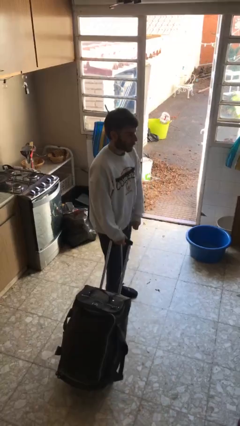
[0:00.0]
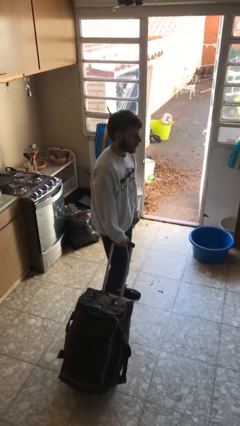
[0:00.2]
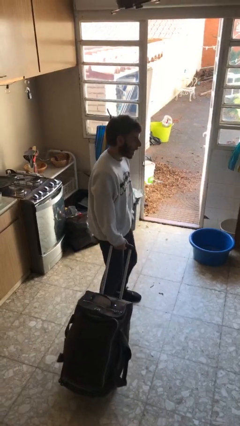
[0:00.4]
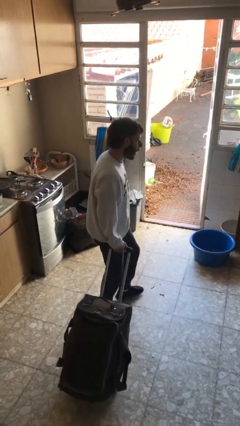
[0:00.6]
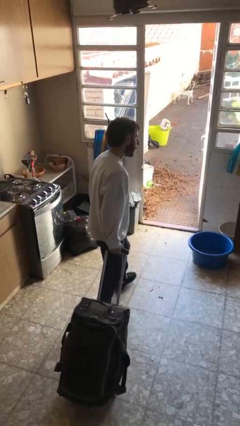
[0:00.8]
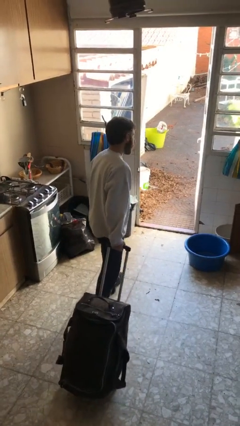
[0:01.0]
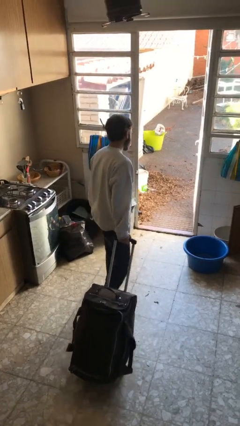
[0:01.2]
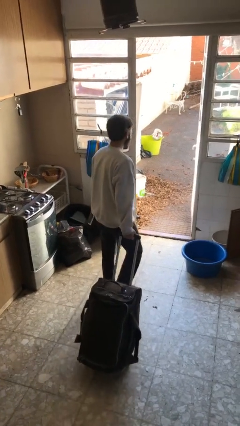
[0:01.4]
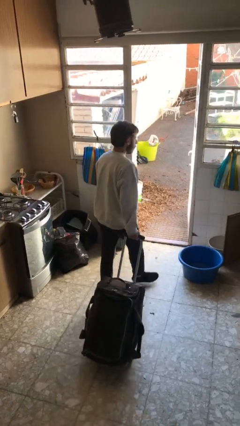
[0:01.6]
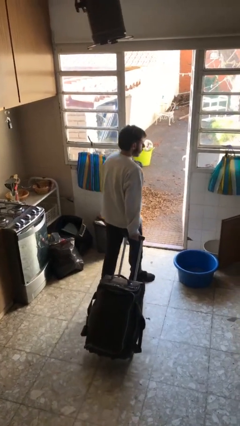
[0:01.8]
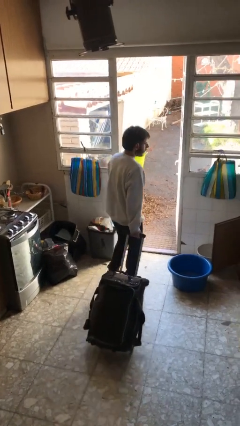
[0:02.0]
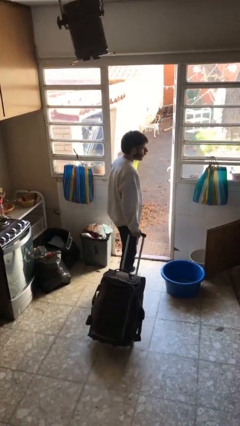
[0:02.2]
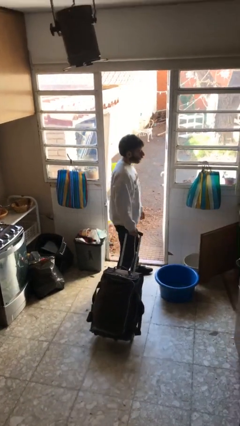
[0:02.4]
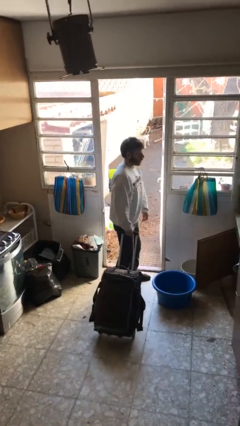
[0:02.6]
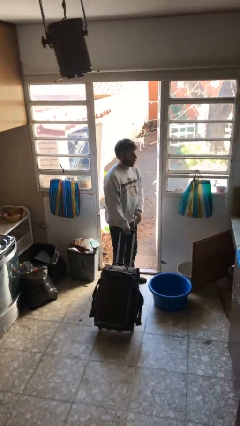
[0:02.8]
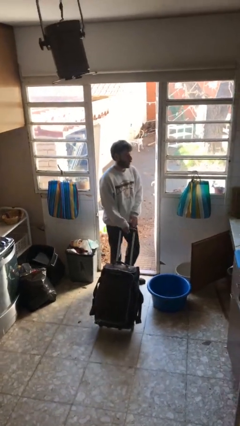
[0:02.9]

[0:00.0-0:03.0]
person pulls wheeled cart

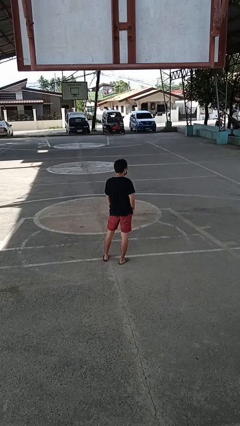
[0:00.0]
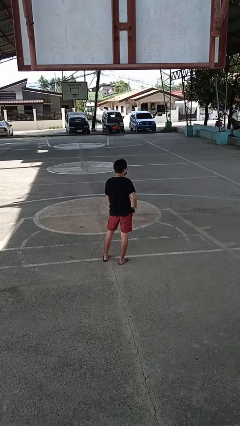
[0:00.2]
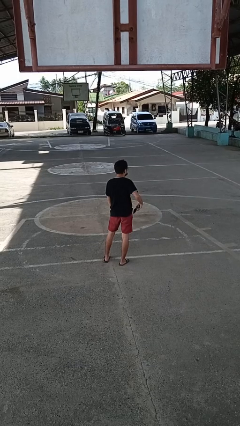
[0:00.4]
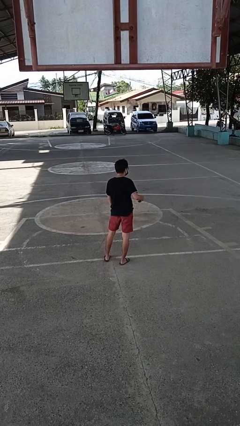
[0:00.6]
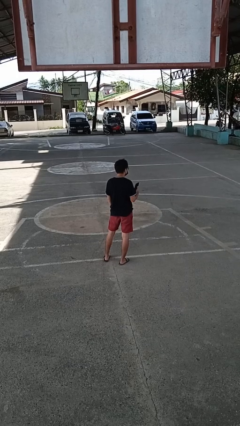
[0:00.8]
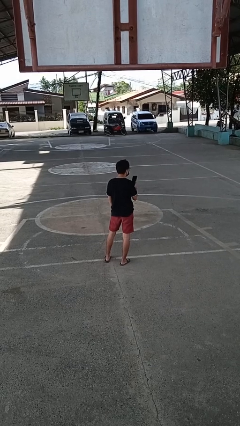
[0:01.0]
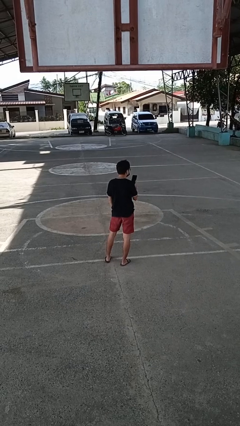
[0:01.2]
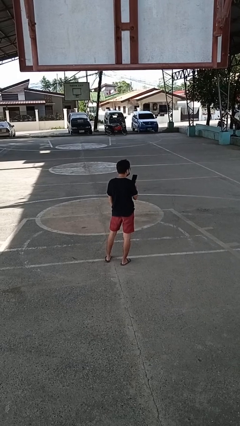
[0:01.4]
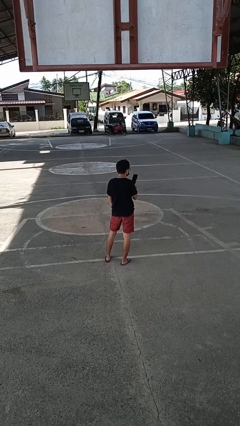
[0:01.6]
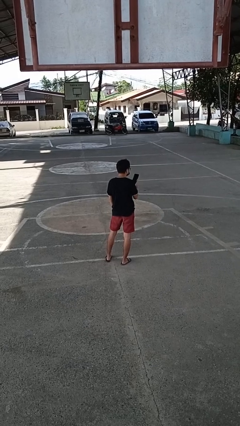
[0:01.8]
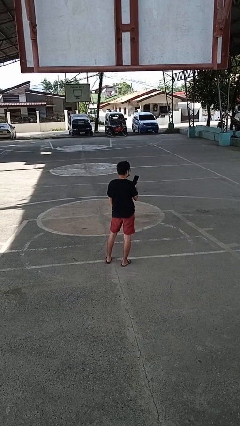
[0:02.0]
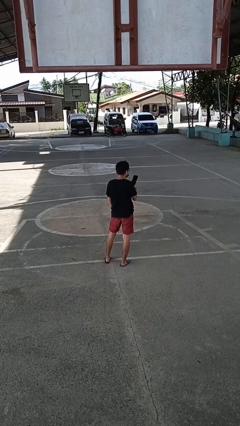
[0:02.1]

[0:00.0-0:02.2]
person takes phone from pocket

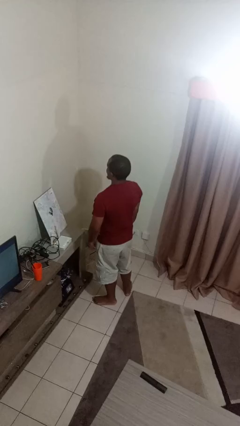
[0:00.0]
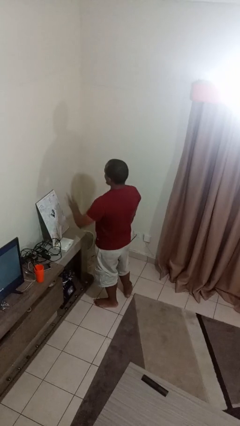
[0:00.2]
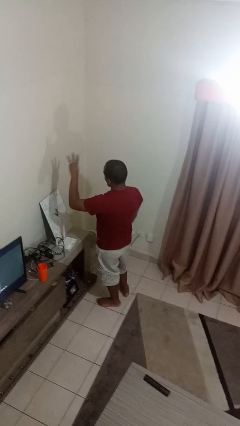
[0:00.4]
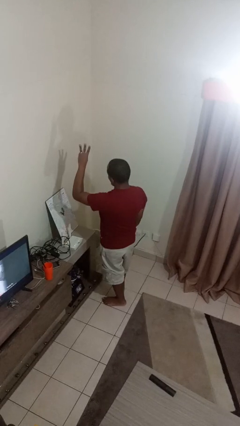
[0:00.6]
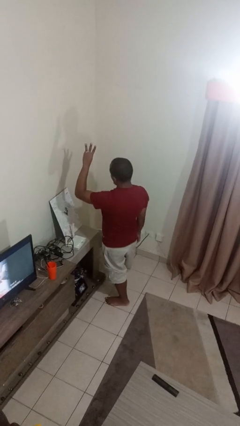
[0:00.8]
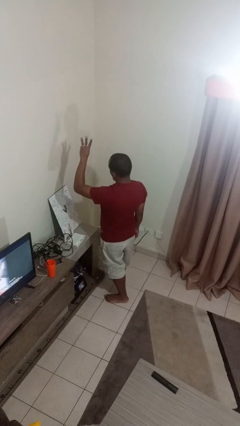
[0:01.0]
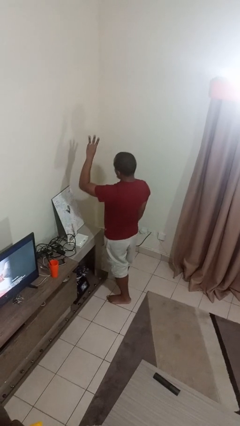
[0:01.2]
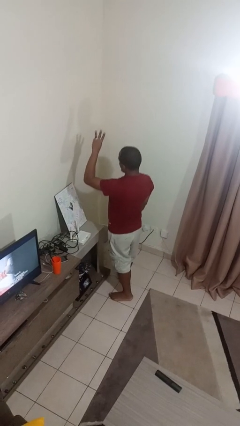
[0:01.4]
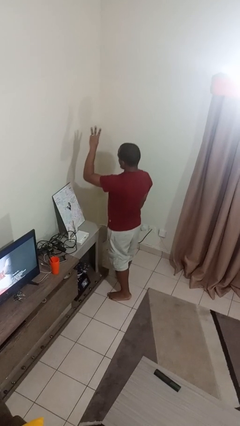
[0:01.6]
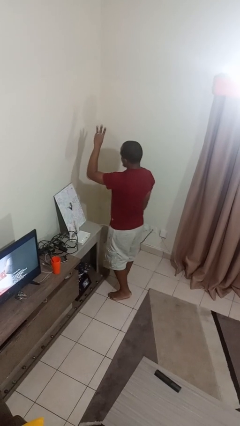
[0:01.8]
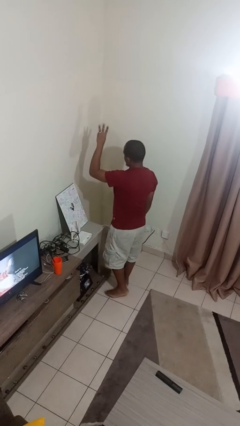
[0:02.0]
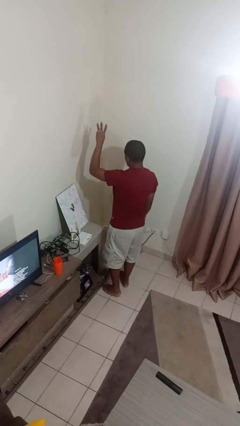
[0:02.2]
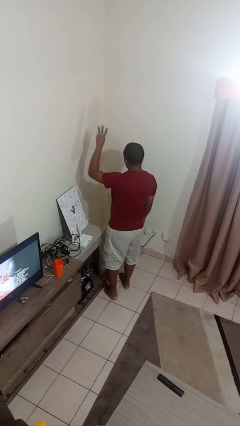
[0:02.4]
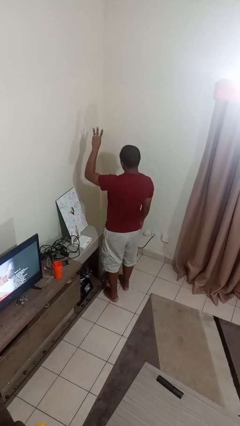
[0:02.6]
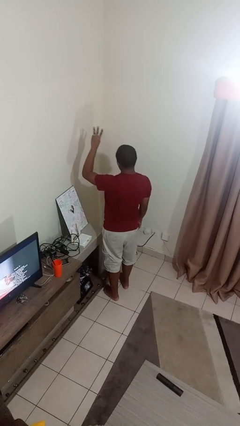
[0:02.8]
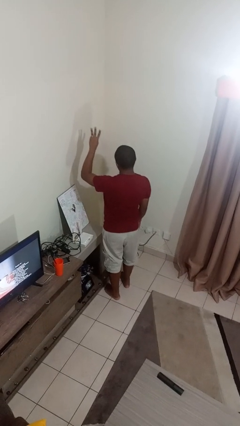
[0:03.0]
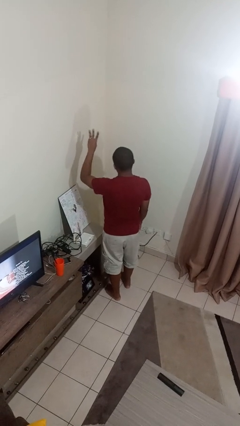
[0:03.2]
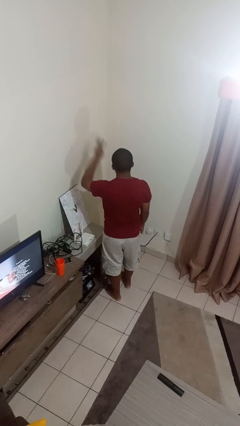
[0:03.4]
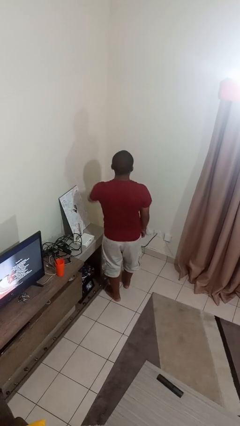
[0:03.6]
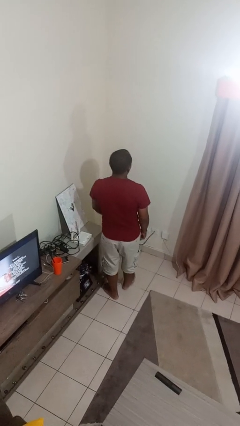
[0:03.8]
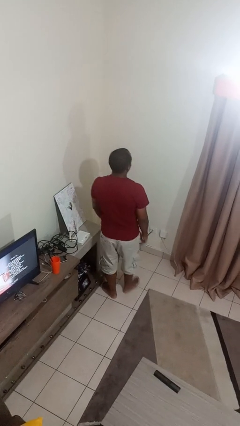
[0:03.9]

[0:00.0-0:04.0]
person gestures number three

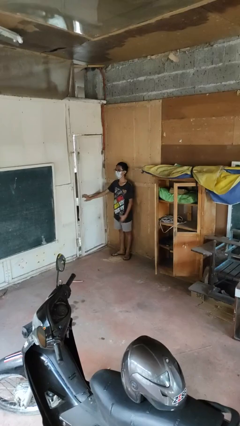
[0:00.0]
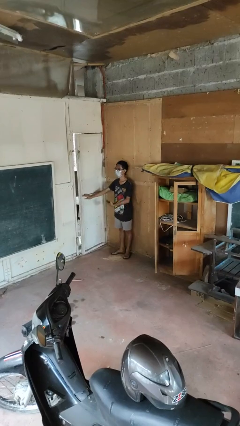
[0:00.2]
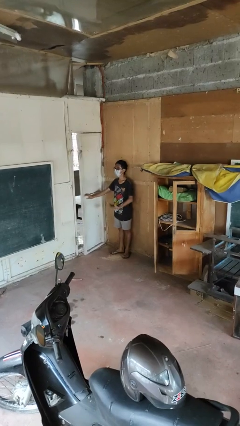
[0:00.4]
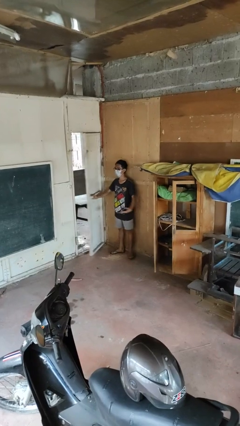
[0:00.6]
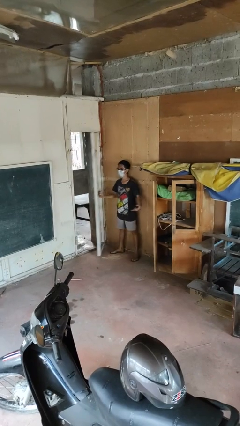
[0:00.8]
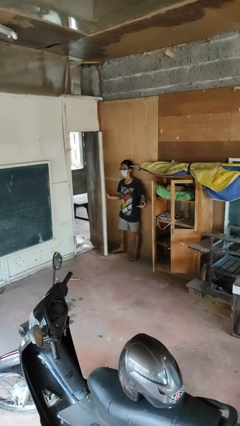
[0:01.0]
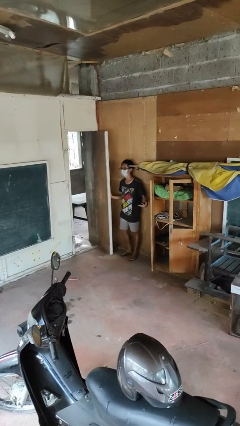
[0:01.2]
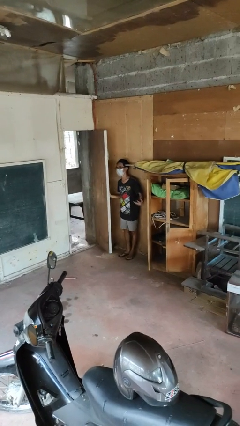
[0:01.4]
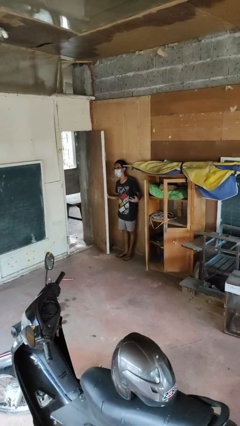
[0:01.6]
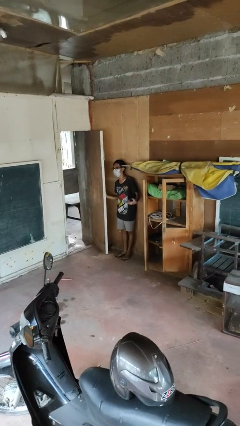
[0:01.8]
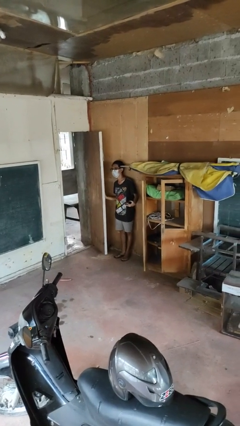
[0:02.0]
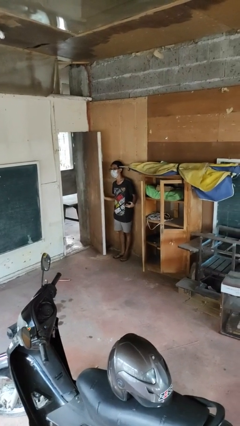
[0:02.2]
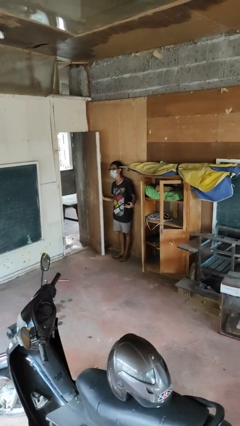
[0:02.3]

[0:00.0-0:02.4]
person opens facility door

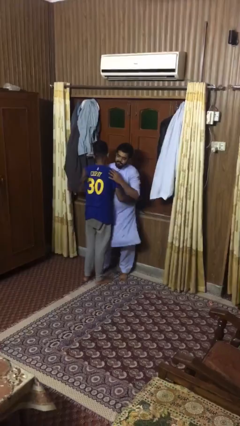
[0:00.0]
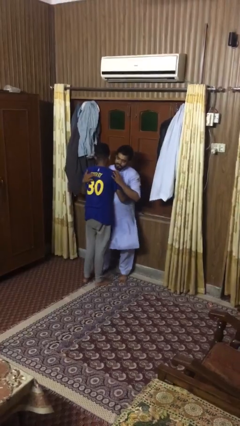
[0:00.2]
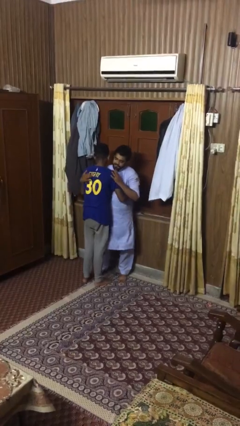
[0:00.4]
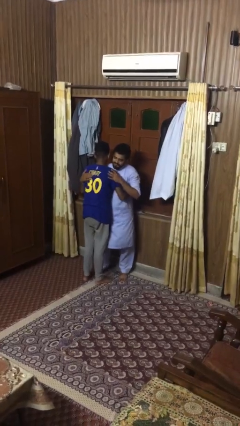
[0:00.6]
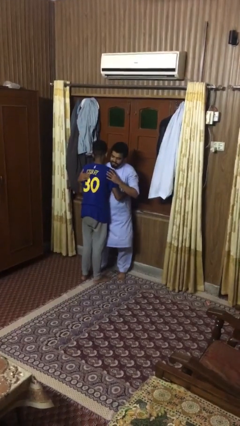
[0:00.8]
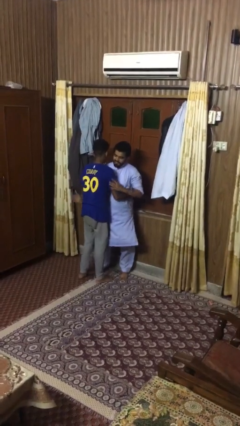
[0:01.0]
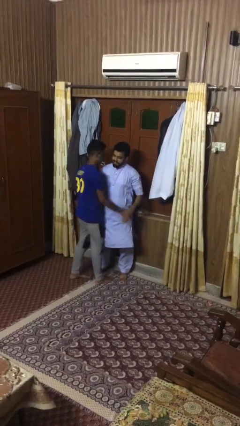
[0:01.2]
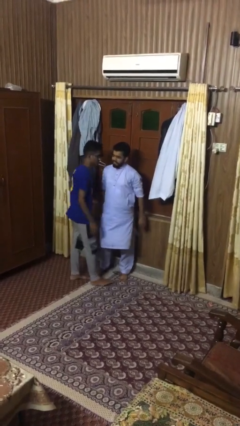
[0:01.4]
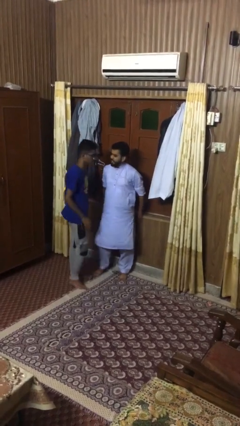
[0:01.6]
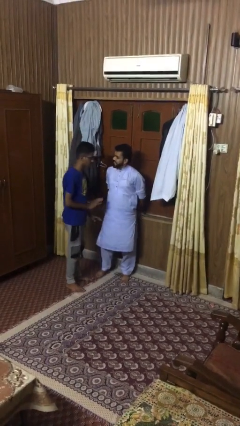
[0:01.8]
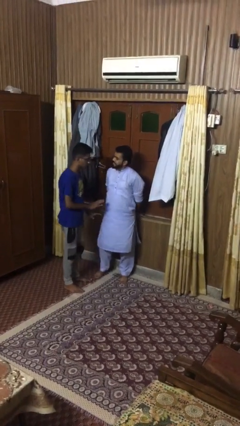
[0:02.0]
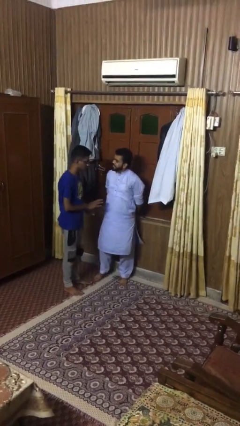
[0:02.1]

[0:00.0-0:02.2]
person embraces person

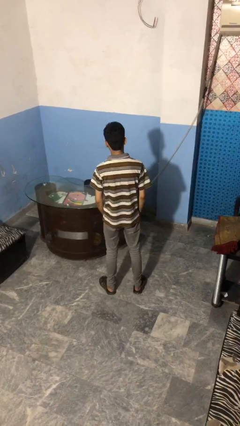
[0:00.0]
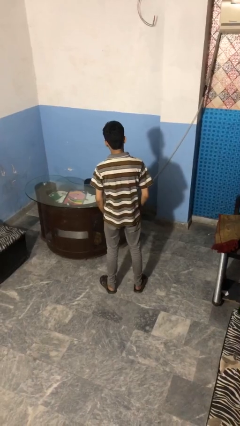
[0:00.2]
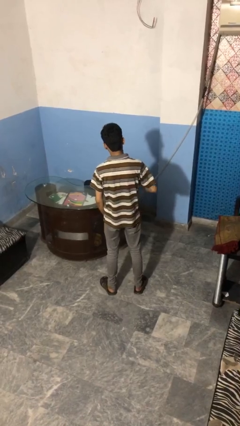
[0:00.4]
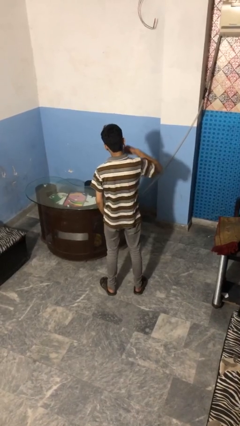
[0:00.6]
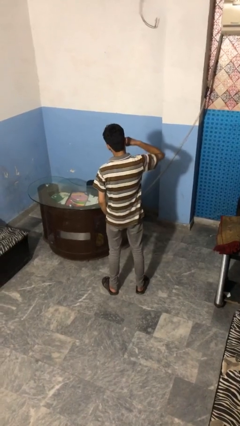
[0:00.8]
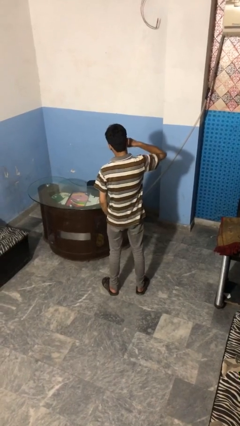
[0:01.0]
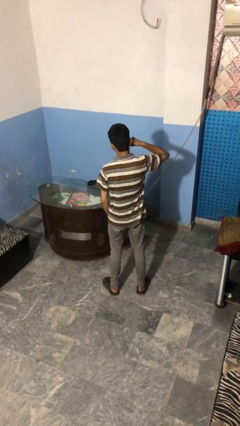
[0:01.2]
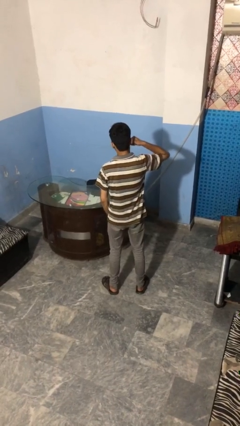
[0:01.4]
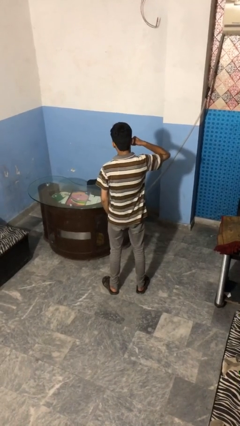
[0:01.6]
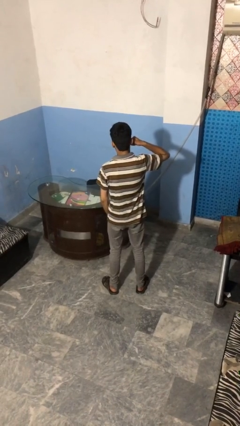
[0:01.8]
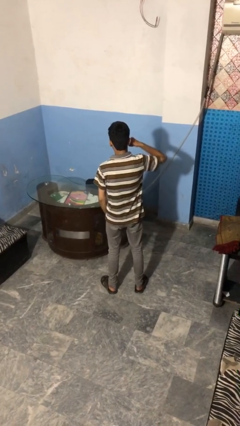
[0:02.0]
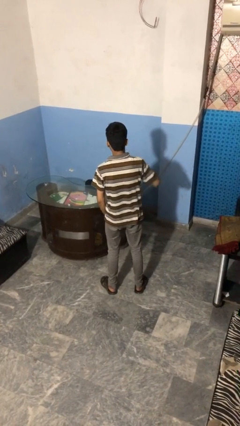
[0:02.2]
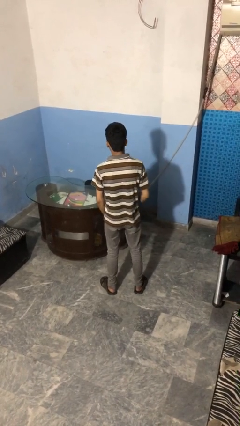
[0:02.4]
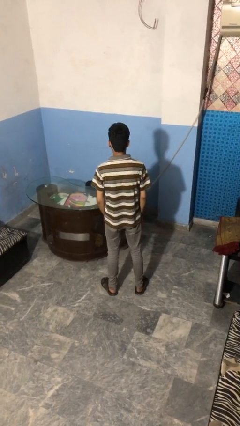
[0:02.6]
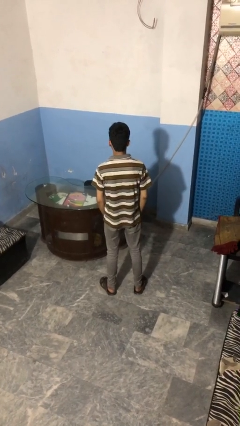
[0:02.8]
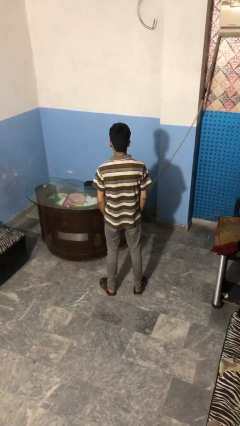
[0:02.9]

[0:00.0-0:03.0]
person gestures call me

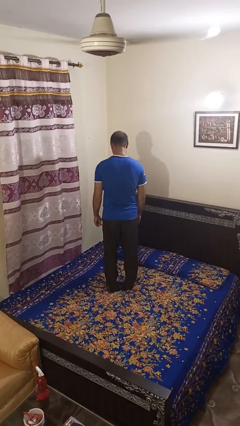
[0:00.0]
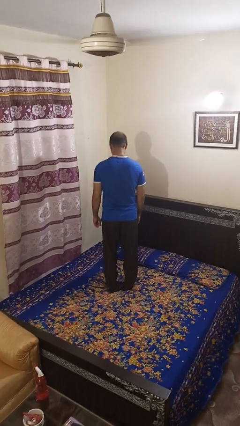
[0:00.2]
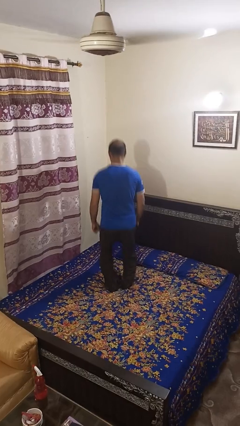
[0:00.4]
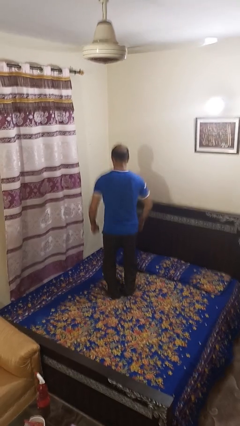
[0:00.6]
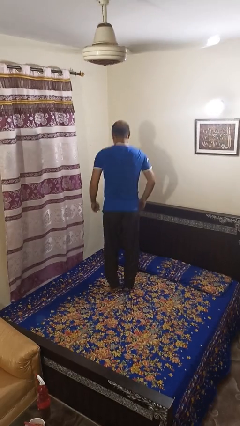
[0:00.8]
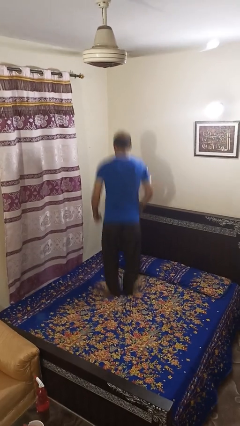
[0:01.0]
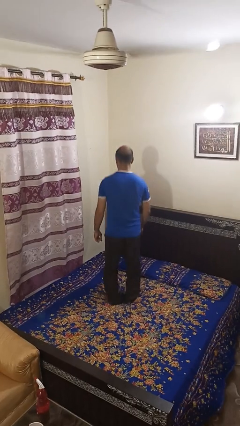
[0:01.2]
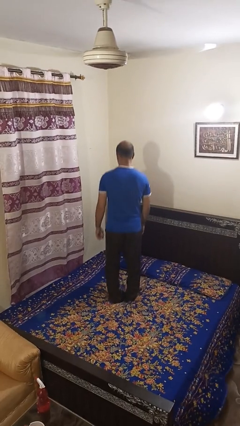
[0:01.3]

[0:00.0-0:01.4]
person jumps on bed
